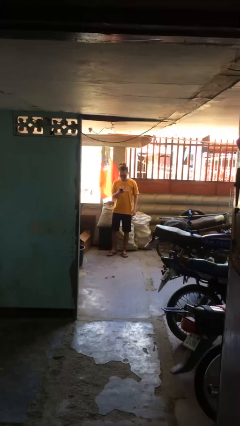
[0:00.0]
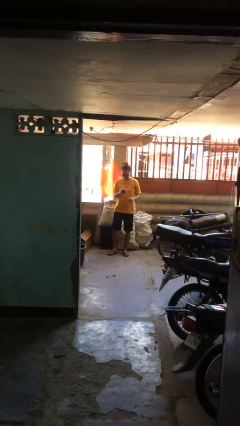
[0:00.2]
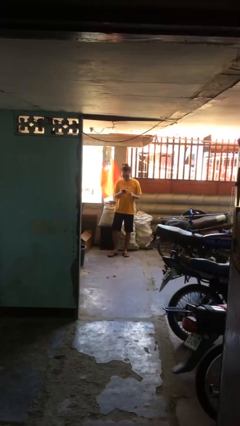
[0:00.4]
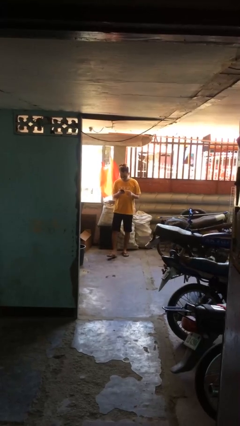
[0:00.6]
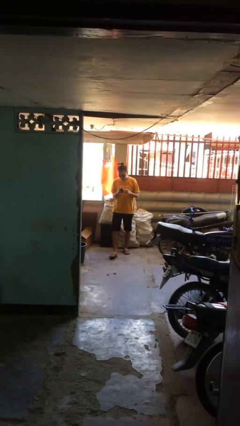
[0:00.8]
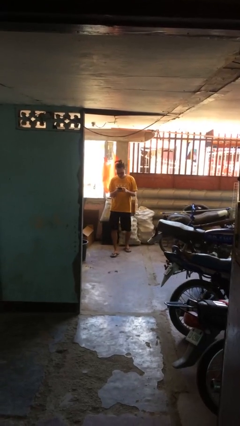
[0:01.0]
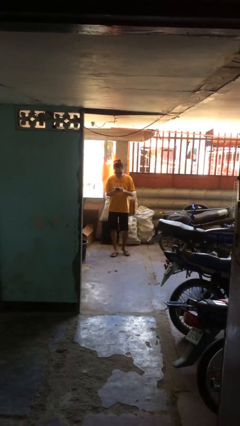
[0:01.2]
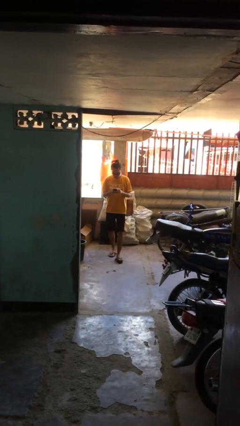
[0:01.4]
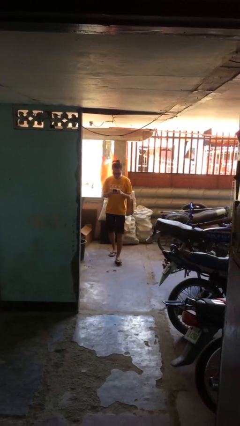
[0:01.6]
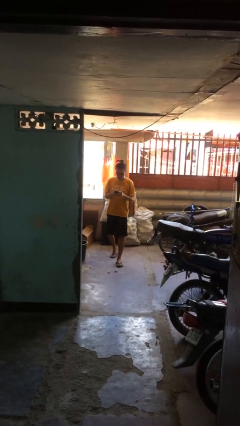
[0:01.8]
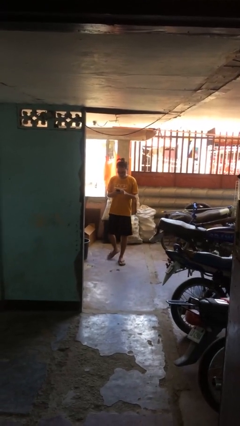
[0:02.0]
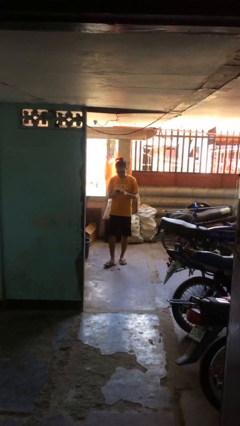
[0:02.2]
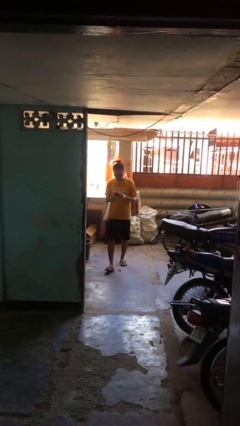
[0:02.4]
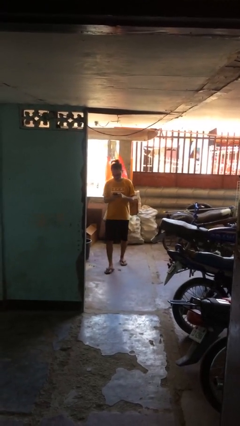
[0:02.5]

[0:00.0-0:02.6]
person texts on phone

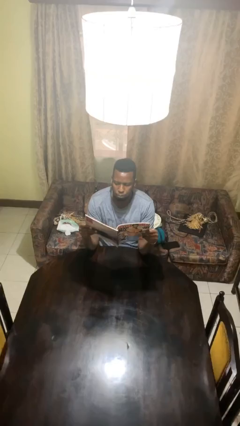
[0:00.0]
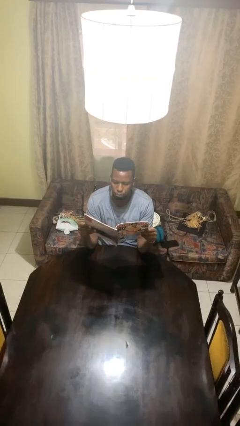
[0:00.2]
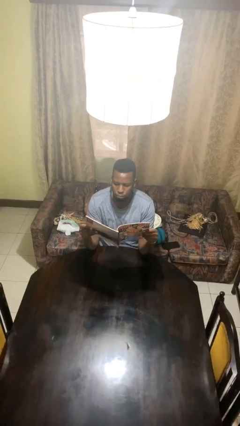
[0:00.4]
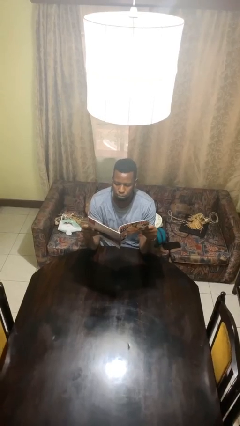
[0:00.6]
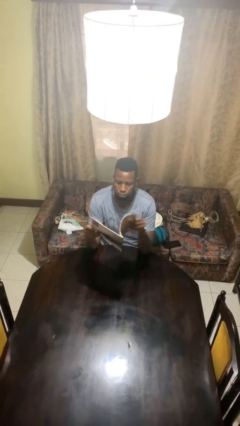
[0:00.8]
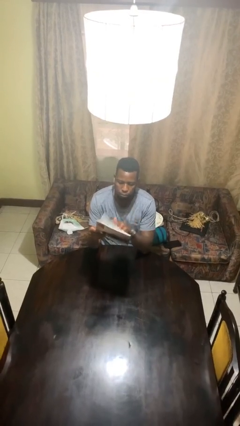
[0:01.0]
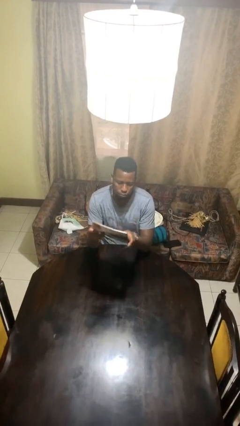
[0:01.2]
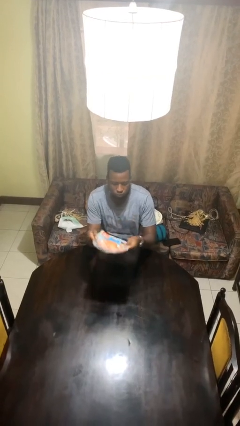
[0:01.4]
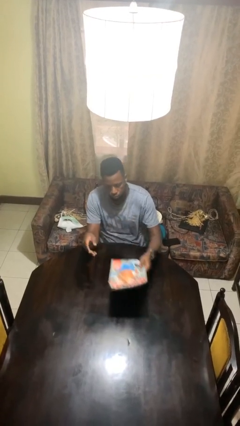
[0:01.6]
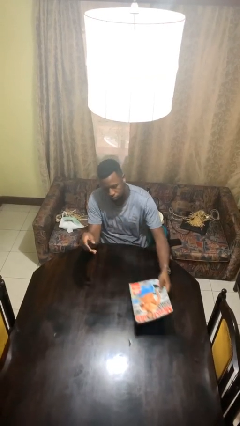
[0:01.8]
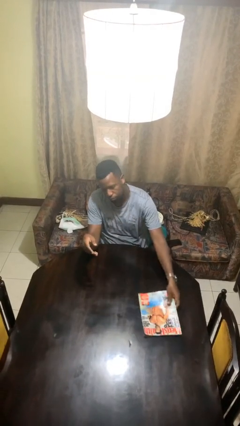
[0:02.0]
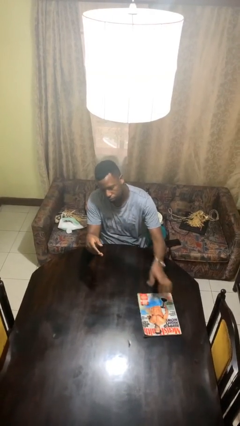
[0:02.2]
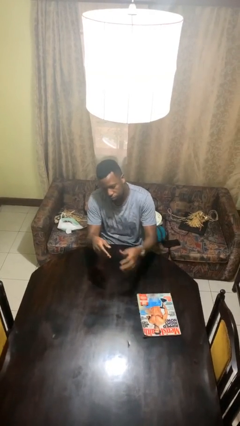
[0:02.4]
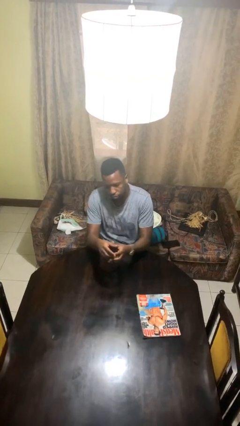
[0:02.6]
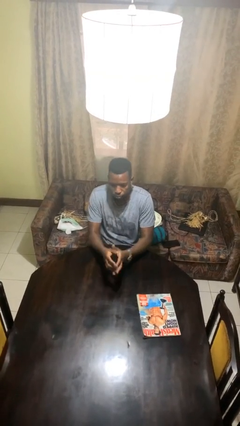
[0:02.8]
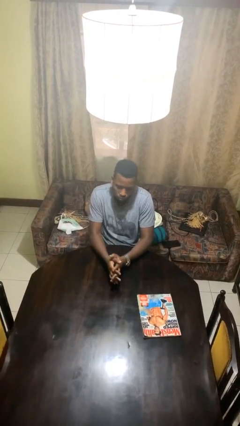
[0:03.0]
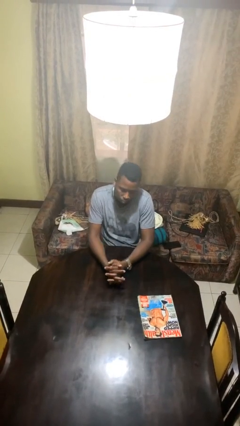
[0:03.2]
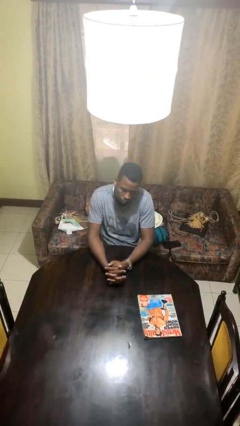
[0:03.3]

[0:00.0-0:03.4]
person puts down object on table

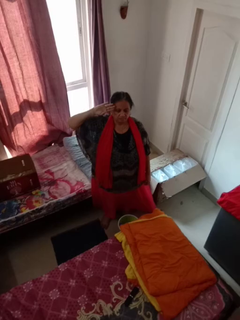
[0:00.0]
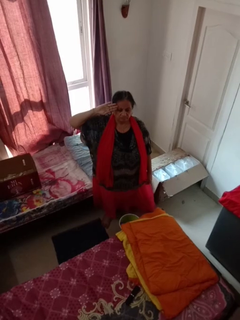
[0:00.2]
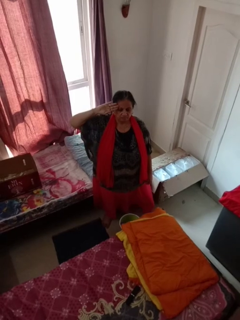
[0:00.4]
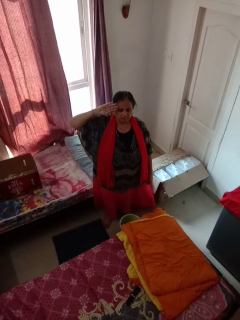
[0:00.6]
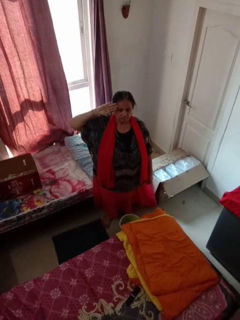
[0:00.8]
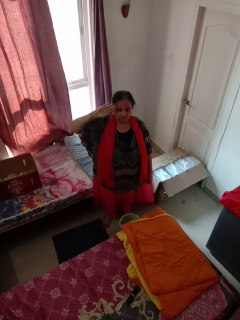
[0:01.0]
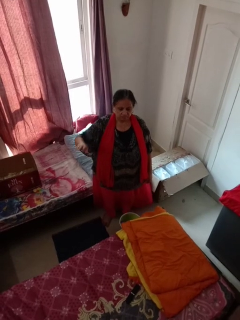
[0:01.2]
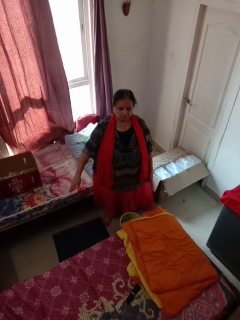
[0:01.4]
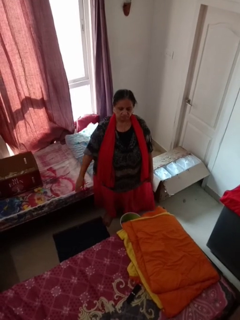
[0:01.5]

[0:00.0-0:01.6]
person salutes

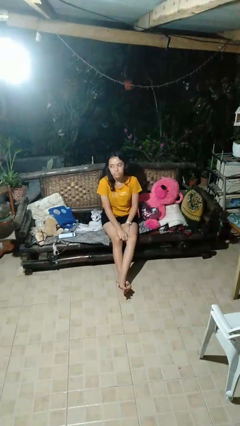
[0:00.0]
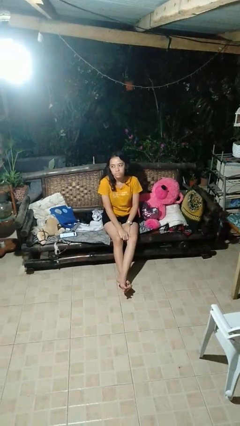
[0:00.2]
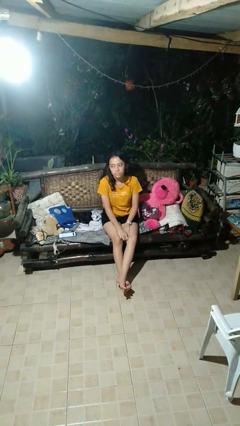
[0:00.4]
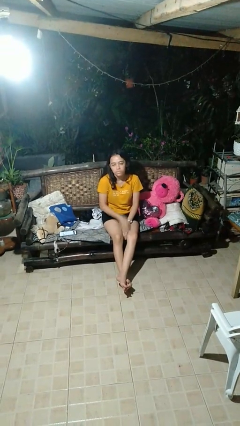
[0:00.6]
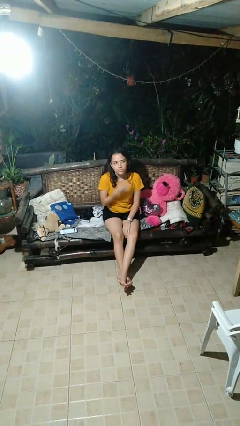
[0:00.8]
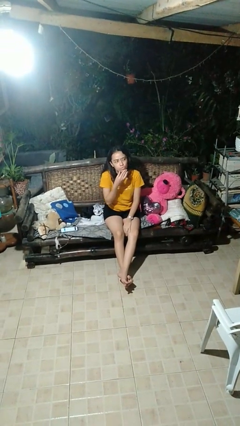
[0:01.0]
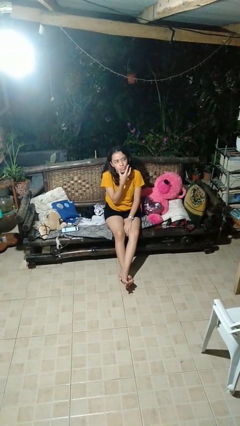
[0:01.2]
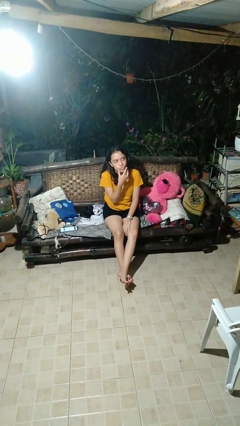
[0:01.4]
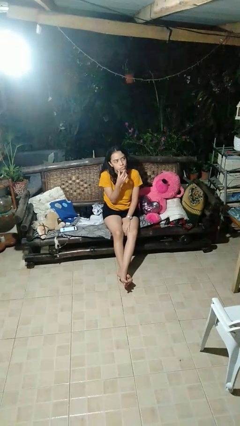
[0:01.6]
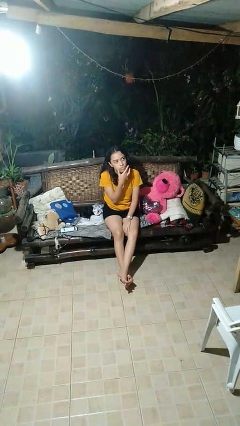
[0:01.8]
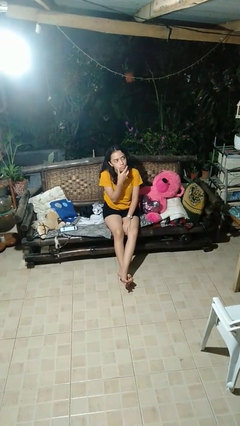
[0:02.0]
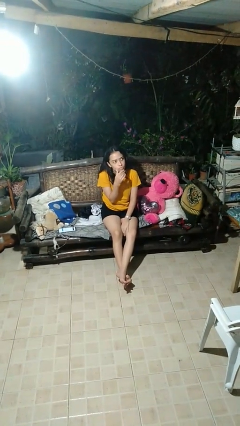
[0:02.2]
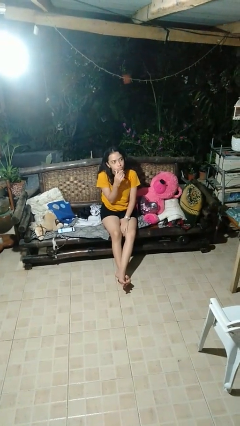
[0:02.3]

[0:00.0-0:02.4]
person strokes chin

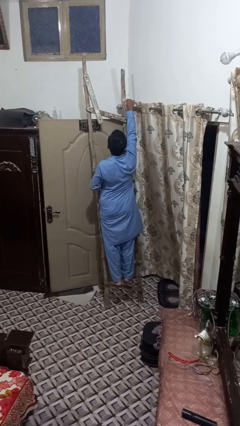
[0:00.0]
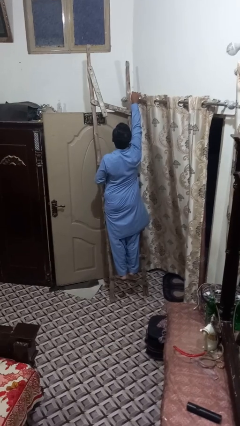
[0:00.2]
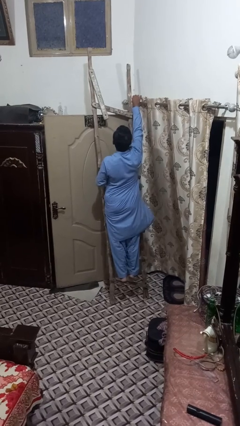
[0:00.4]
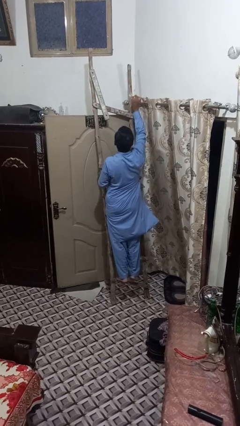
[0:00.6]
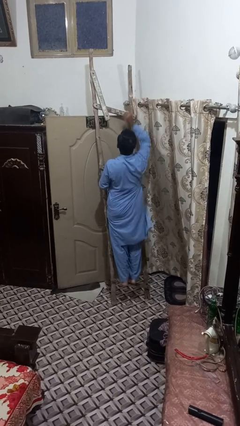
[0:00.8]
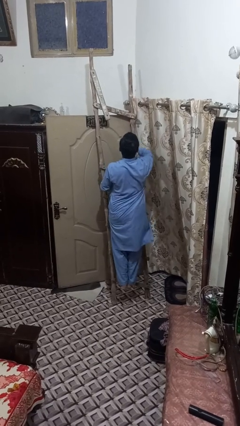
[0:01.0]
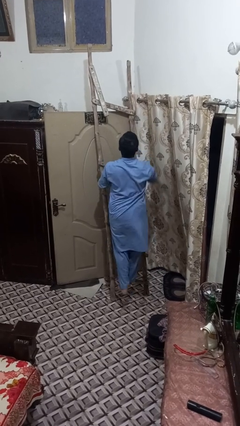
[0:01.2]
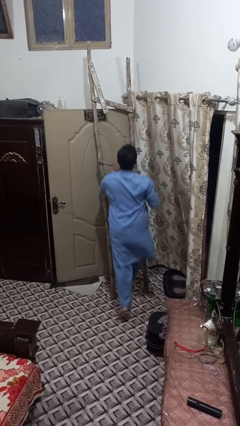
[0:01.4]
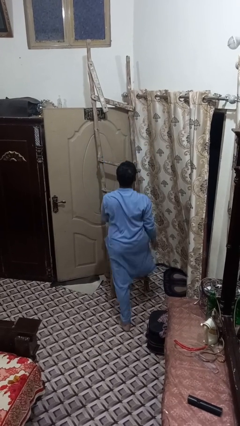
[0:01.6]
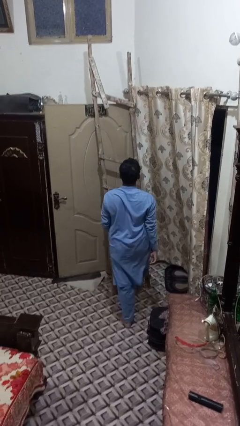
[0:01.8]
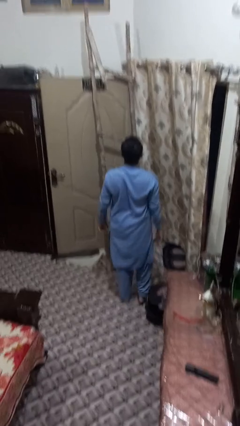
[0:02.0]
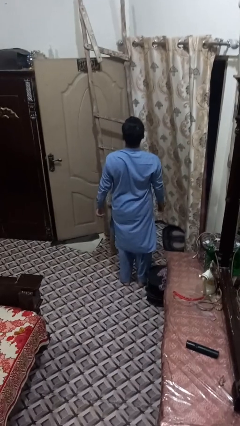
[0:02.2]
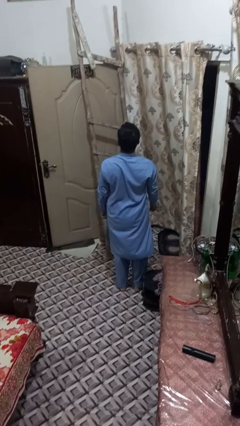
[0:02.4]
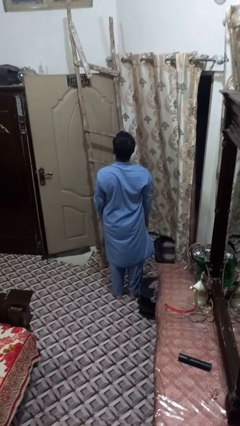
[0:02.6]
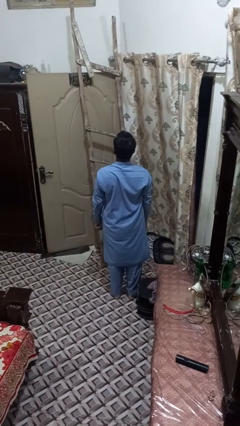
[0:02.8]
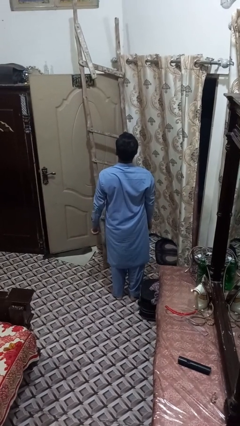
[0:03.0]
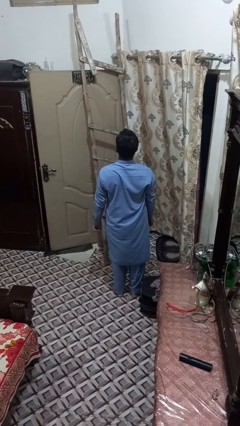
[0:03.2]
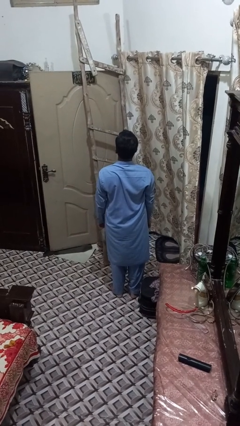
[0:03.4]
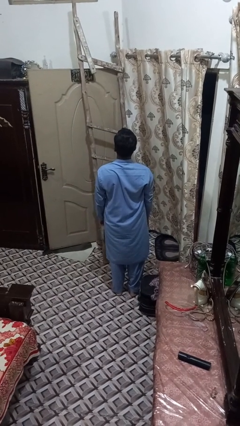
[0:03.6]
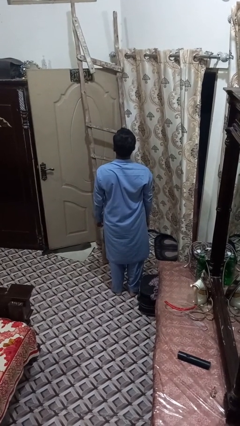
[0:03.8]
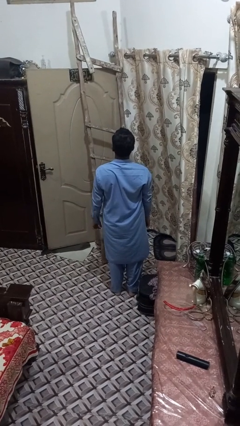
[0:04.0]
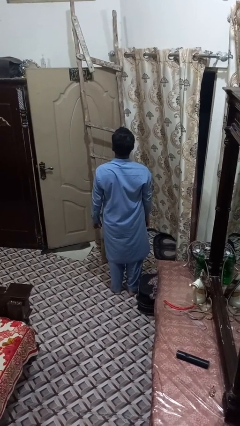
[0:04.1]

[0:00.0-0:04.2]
person climbs down ladder

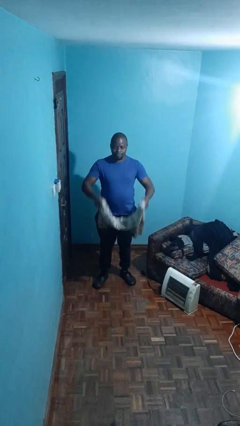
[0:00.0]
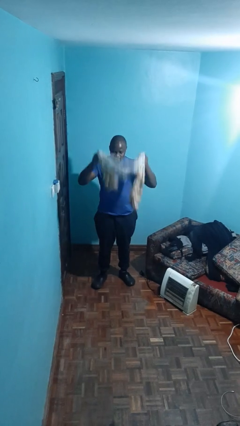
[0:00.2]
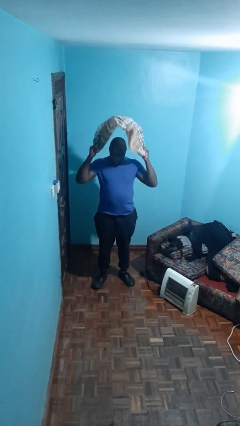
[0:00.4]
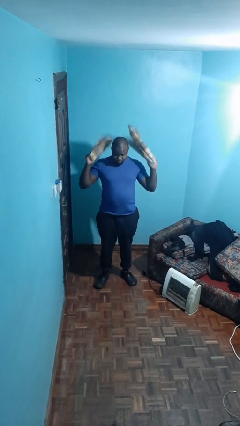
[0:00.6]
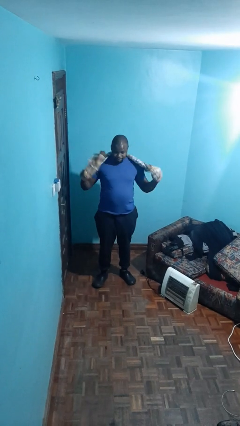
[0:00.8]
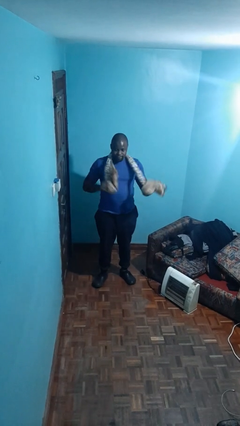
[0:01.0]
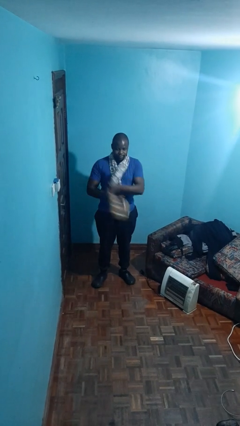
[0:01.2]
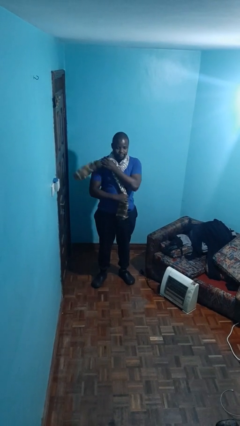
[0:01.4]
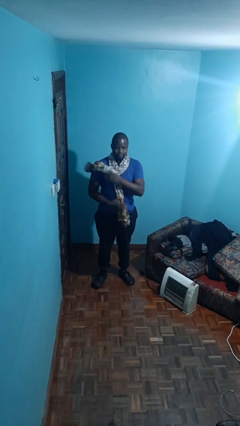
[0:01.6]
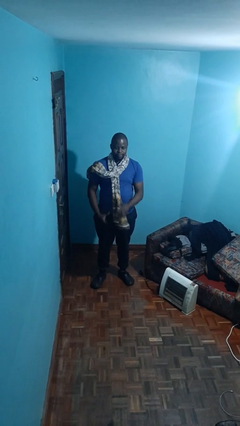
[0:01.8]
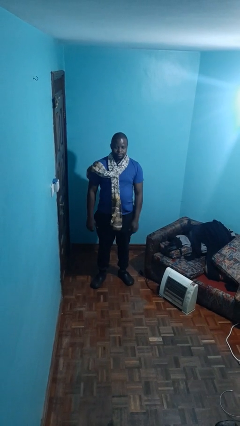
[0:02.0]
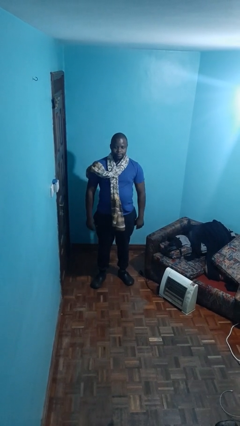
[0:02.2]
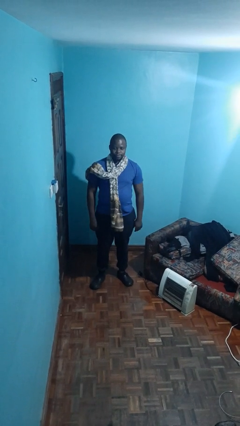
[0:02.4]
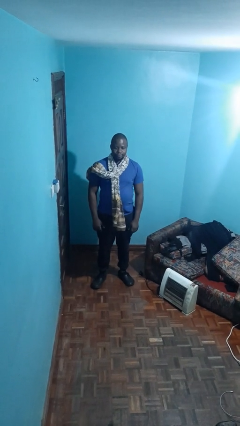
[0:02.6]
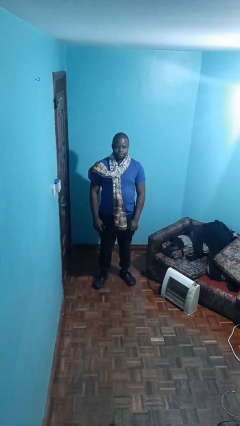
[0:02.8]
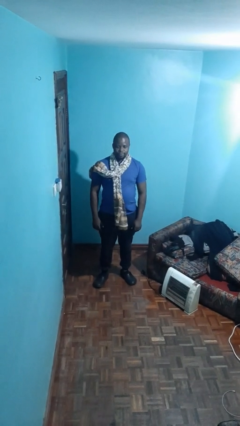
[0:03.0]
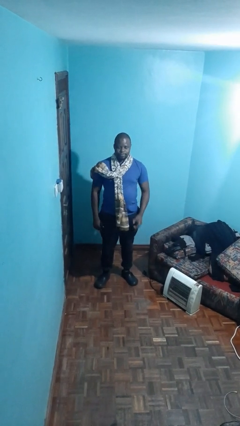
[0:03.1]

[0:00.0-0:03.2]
person puts on scarf

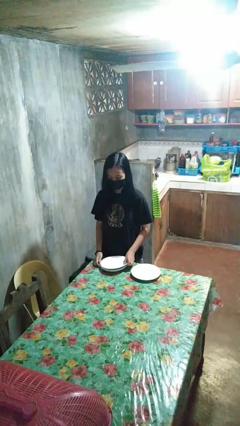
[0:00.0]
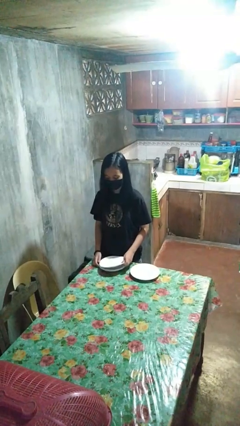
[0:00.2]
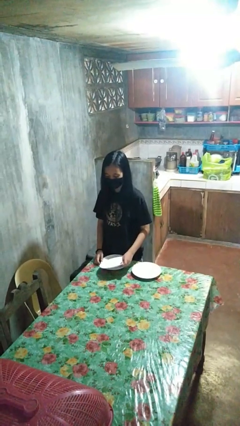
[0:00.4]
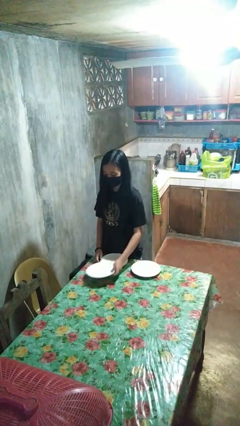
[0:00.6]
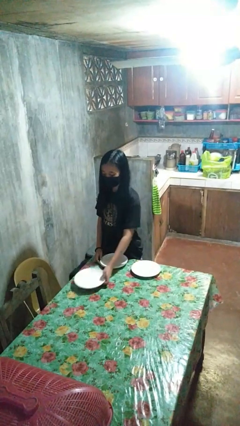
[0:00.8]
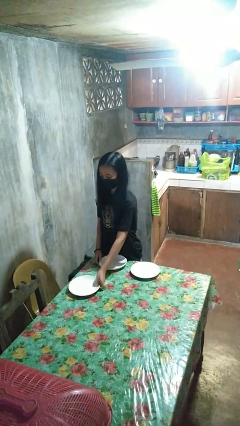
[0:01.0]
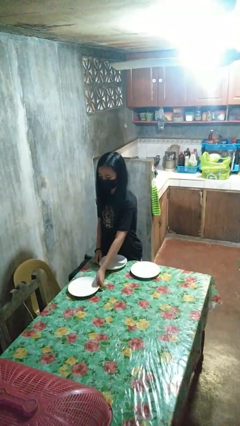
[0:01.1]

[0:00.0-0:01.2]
person sets table
